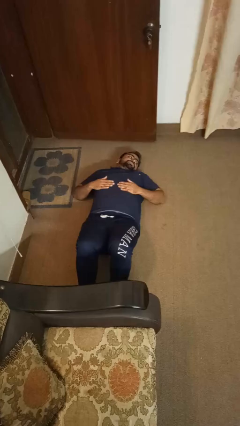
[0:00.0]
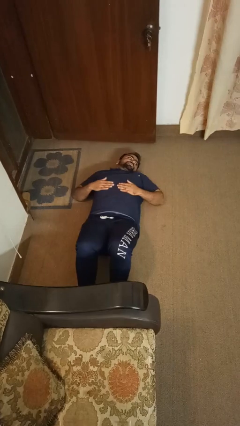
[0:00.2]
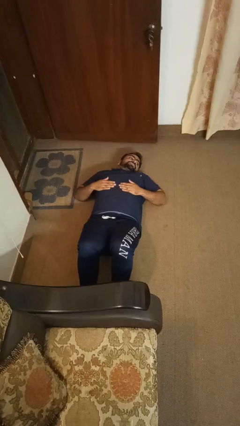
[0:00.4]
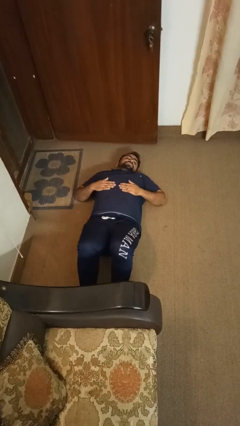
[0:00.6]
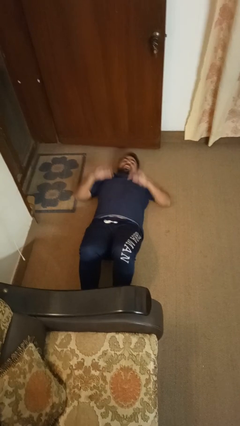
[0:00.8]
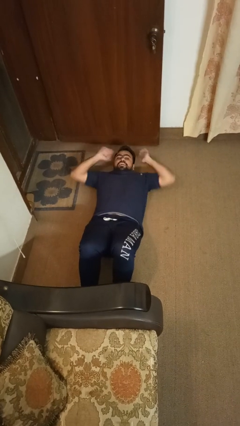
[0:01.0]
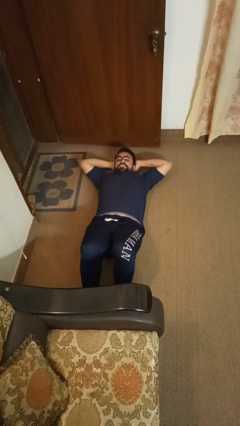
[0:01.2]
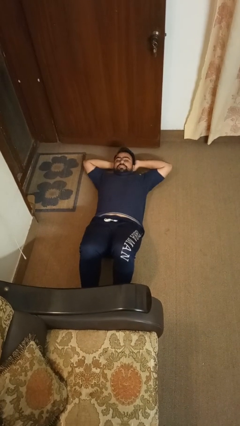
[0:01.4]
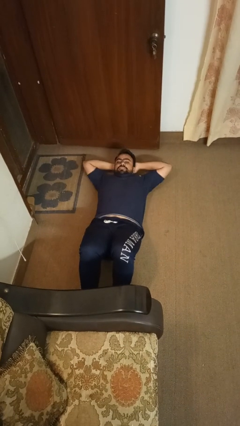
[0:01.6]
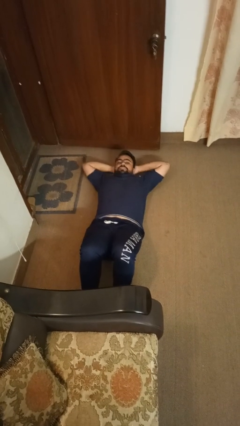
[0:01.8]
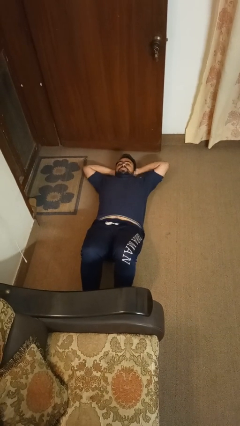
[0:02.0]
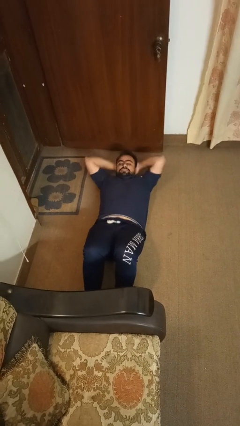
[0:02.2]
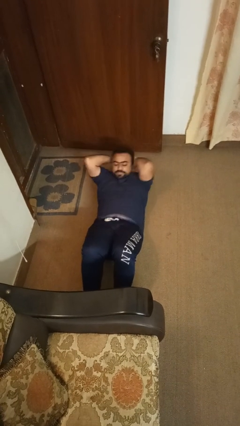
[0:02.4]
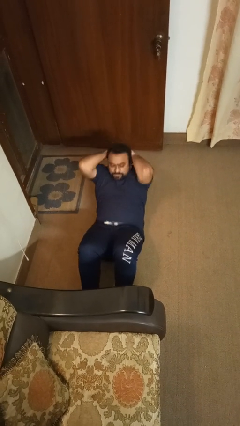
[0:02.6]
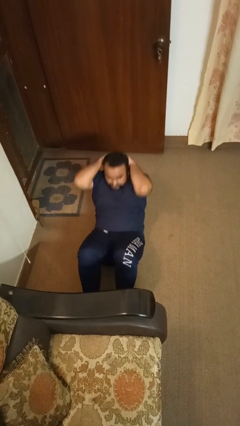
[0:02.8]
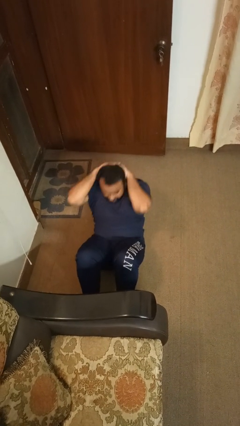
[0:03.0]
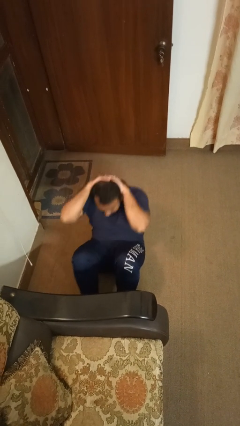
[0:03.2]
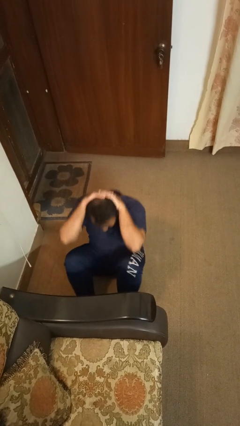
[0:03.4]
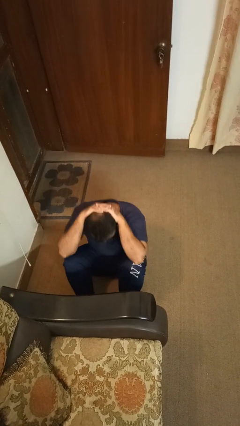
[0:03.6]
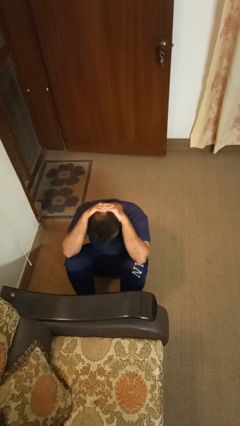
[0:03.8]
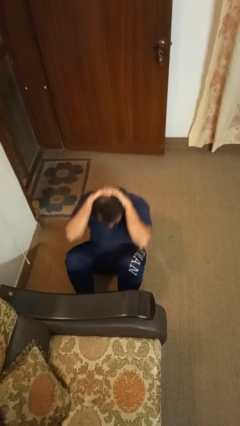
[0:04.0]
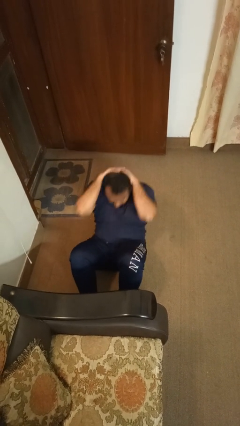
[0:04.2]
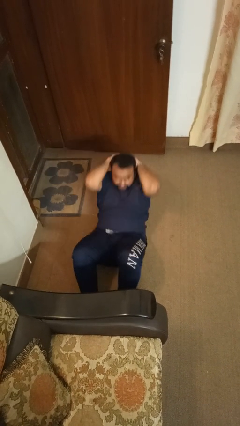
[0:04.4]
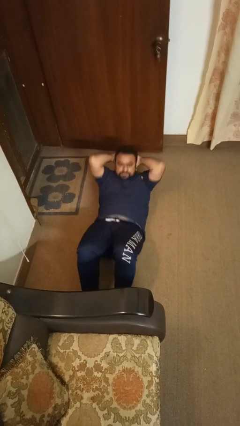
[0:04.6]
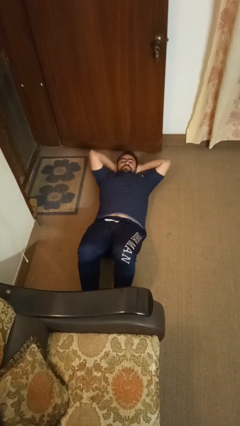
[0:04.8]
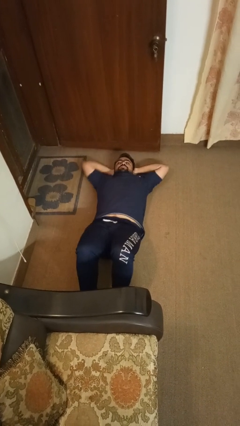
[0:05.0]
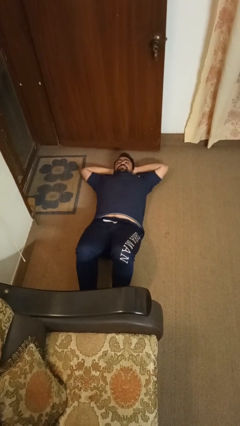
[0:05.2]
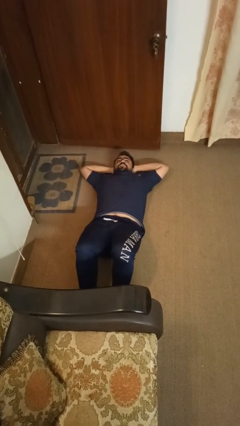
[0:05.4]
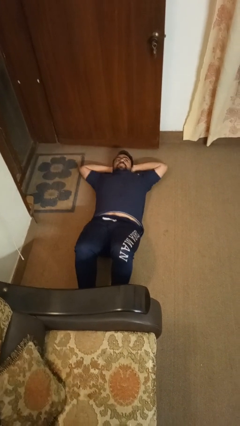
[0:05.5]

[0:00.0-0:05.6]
person exercises with situp

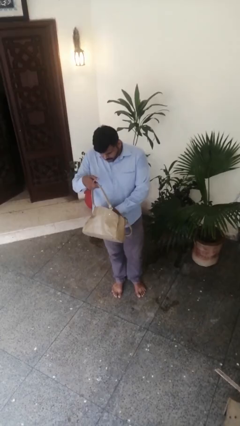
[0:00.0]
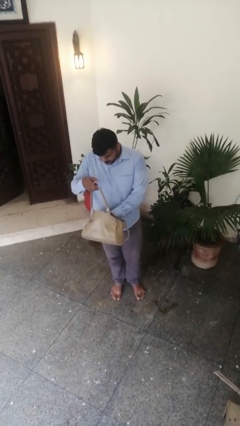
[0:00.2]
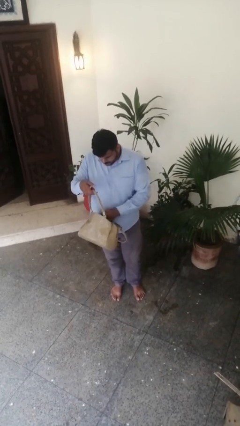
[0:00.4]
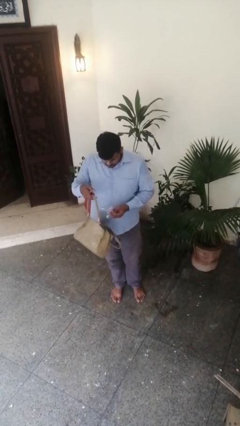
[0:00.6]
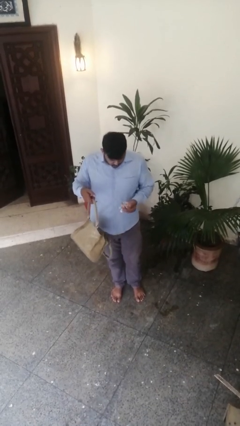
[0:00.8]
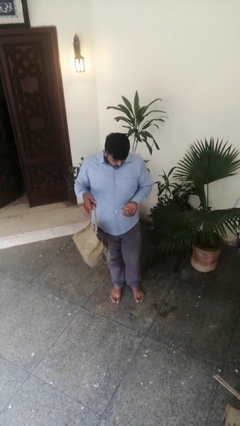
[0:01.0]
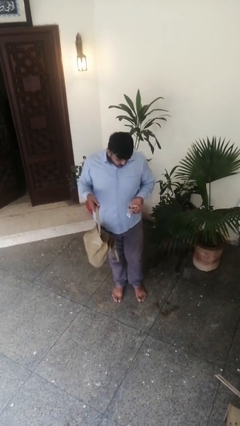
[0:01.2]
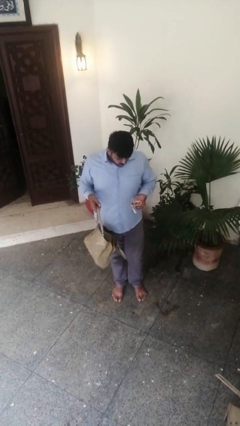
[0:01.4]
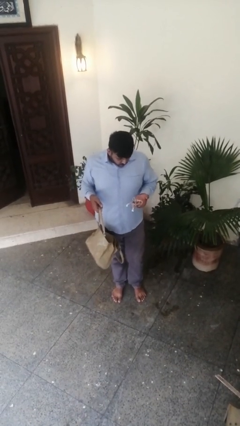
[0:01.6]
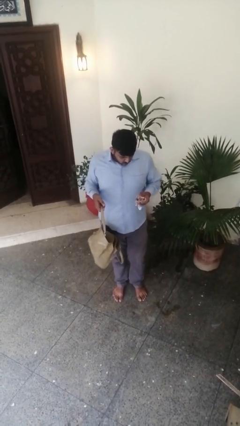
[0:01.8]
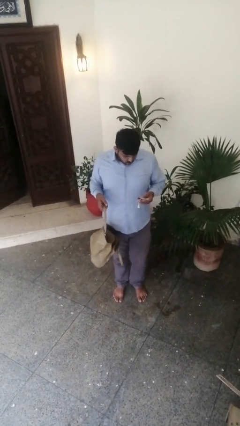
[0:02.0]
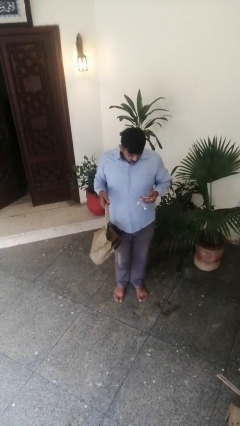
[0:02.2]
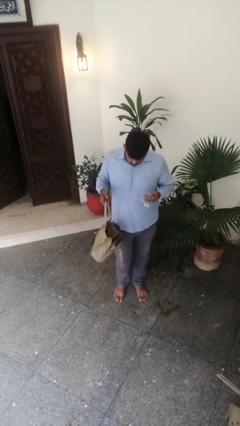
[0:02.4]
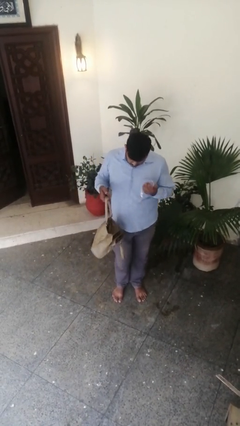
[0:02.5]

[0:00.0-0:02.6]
person takes object from purse

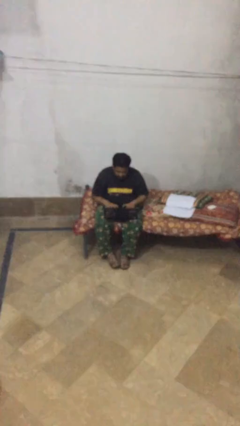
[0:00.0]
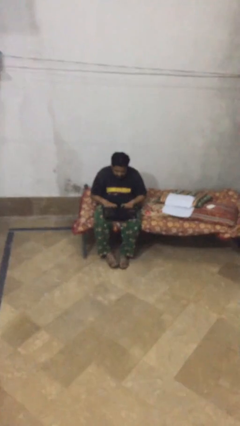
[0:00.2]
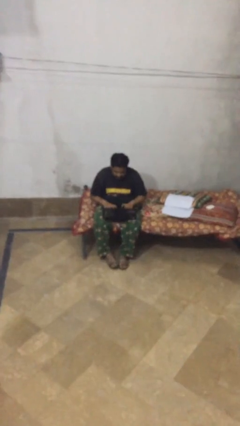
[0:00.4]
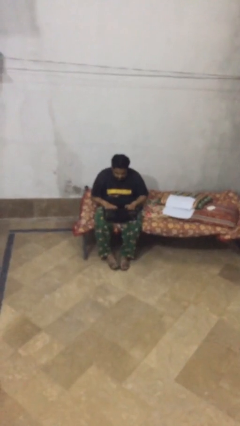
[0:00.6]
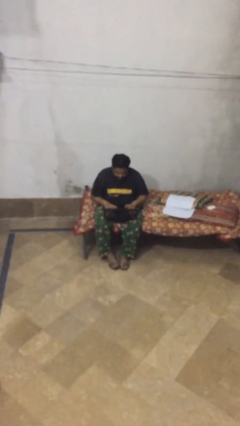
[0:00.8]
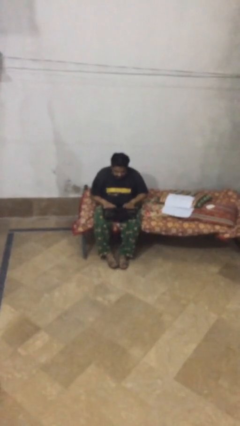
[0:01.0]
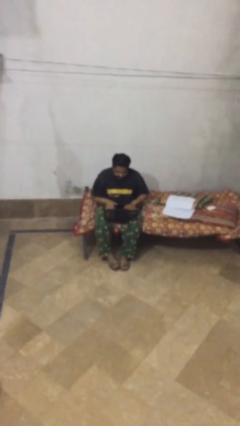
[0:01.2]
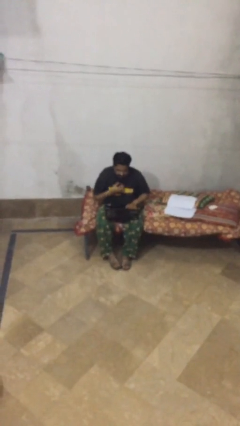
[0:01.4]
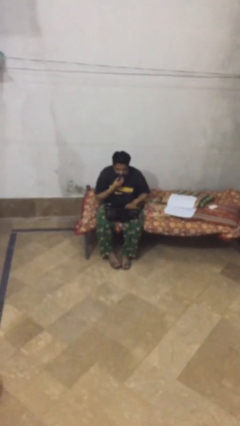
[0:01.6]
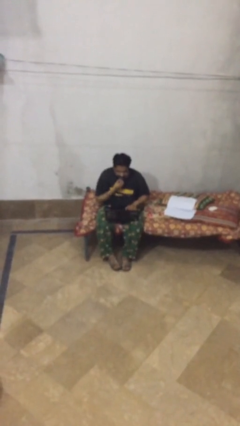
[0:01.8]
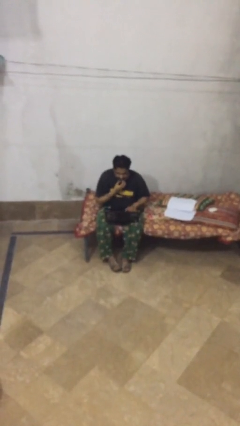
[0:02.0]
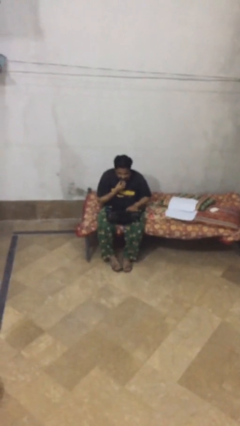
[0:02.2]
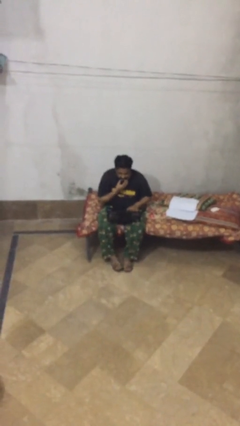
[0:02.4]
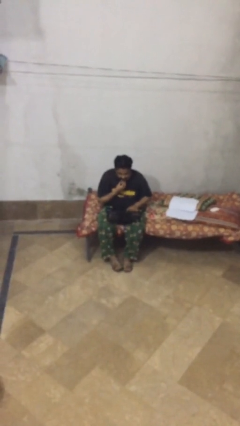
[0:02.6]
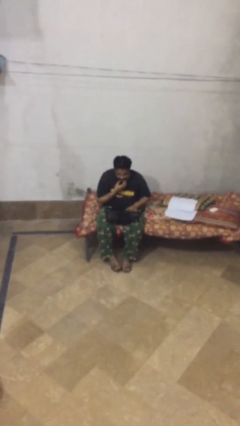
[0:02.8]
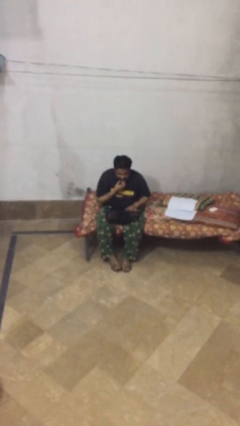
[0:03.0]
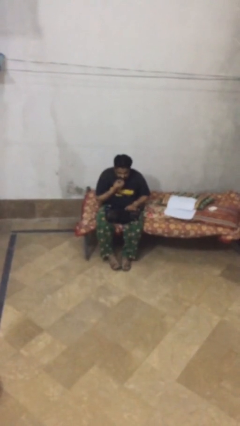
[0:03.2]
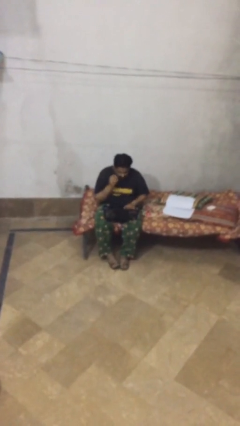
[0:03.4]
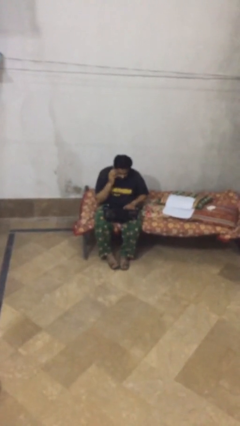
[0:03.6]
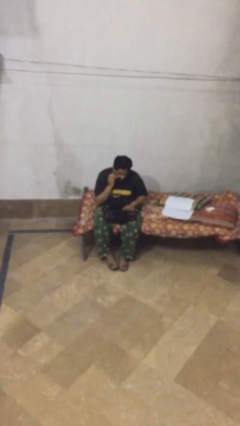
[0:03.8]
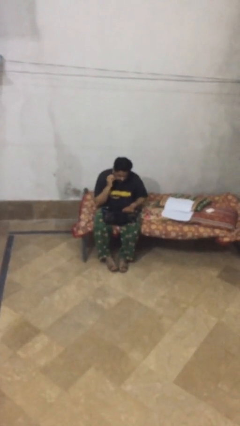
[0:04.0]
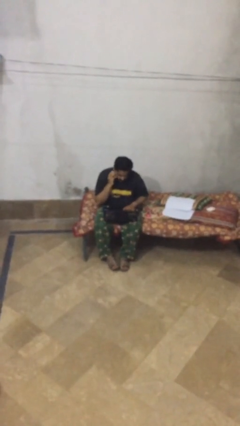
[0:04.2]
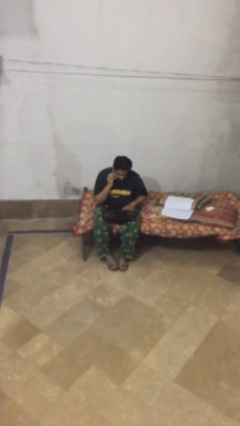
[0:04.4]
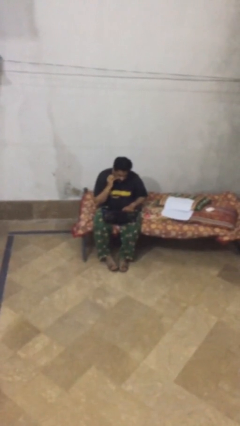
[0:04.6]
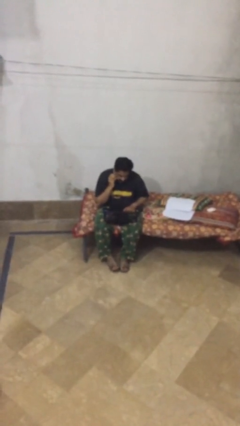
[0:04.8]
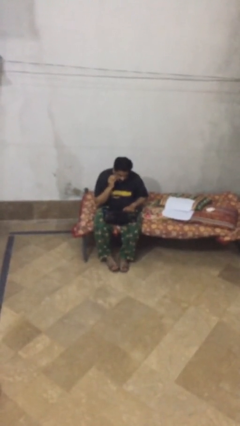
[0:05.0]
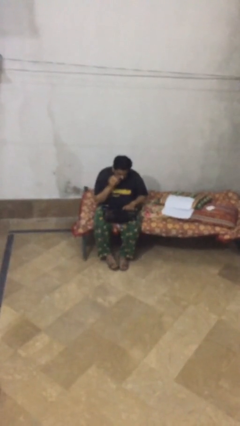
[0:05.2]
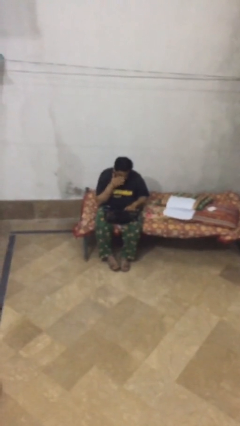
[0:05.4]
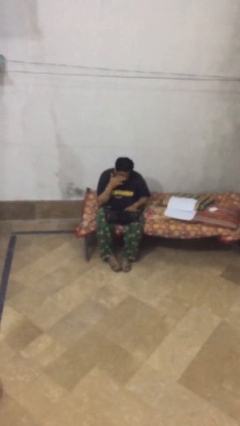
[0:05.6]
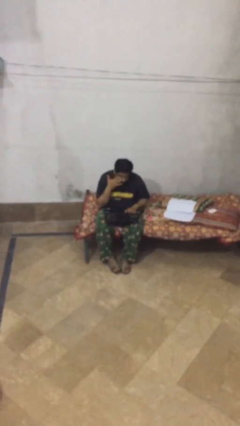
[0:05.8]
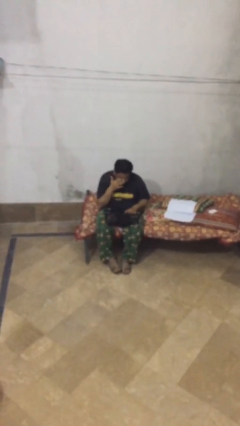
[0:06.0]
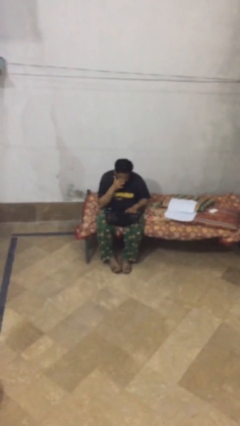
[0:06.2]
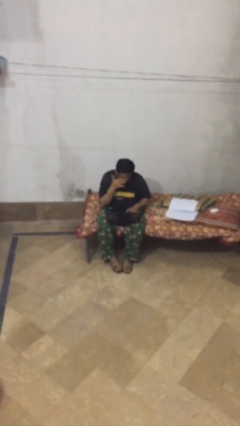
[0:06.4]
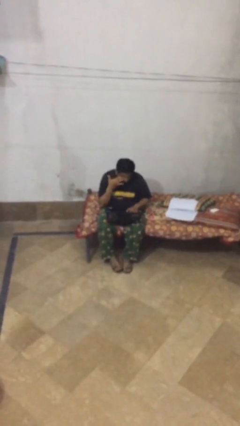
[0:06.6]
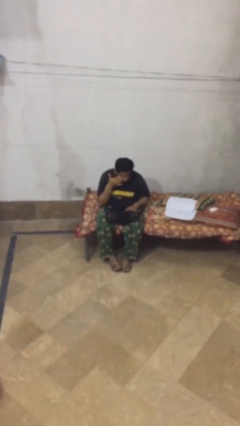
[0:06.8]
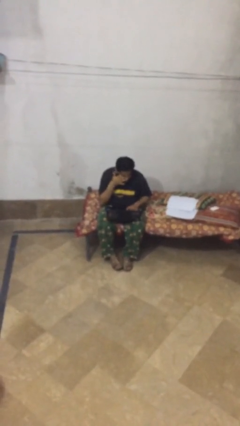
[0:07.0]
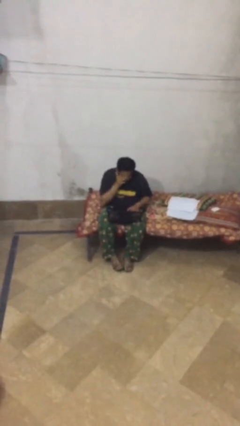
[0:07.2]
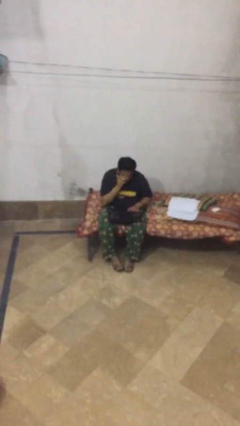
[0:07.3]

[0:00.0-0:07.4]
person interacts with laptop

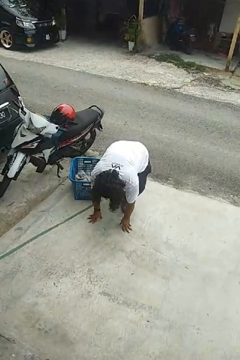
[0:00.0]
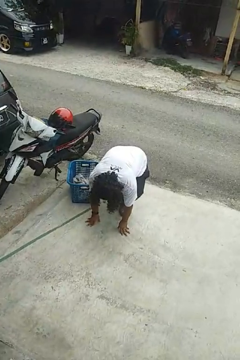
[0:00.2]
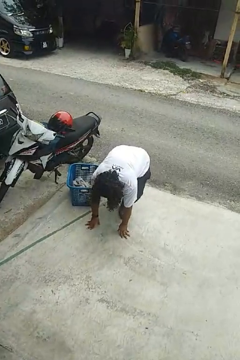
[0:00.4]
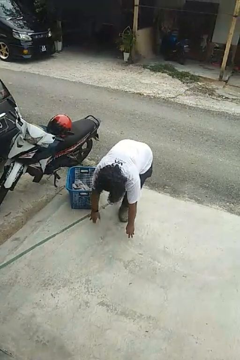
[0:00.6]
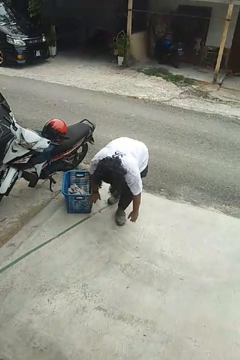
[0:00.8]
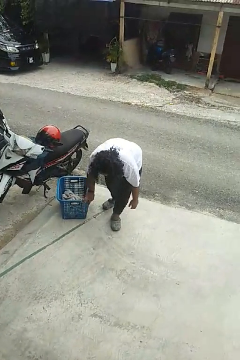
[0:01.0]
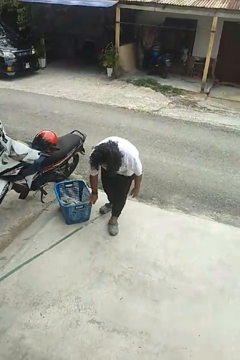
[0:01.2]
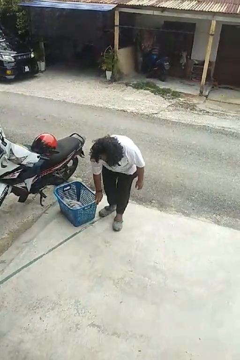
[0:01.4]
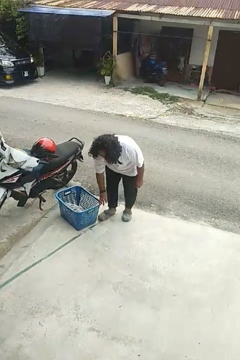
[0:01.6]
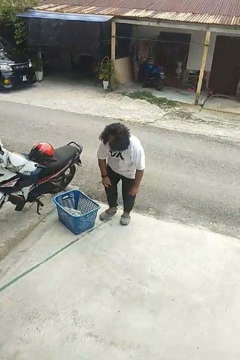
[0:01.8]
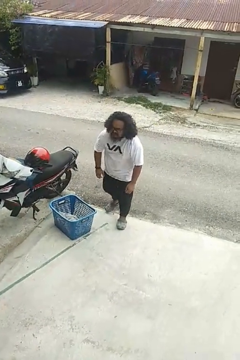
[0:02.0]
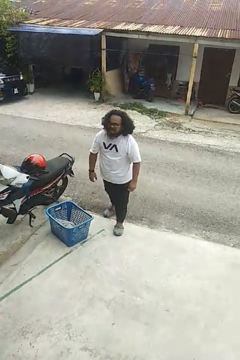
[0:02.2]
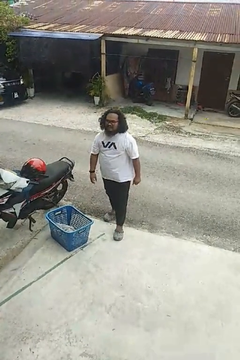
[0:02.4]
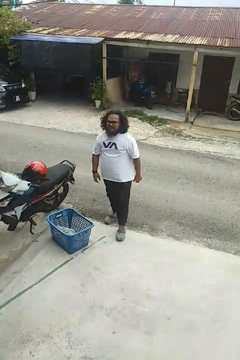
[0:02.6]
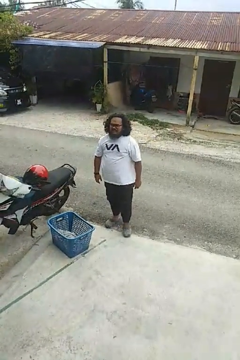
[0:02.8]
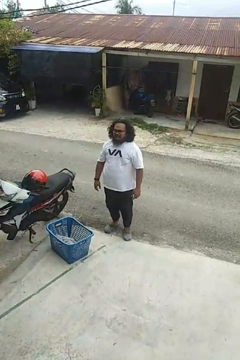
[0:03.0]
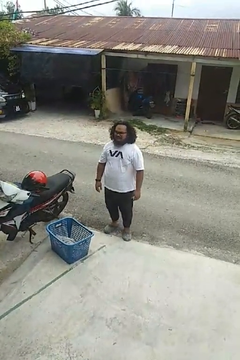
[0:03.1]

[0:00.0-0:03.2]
person stands up from floor
